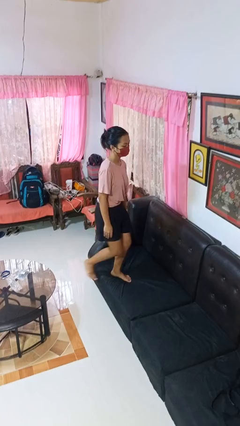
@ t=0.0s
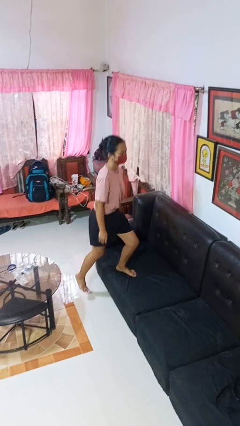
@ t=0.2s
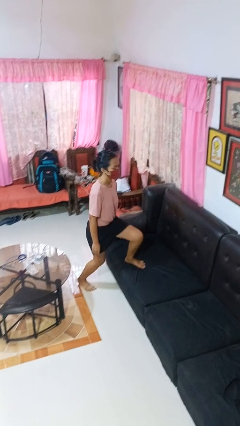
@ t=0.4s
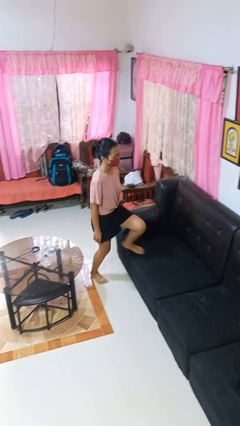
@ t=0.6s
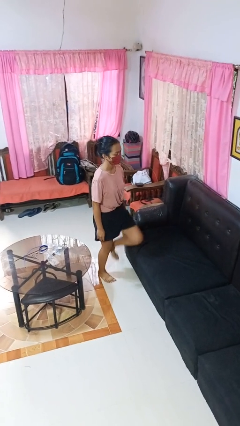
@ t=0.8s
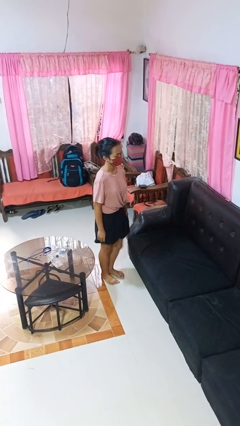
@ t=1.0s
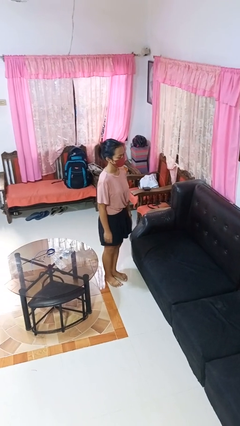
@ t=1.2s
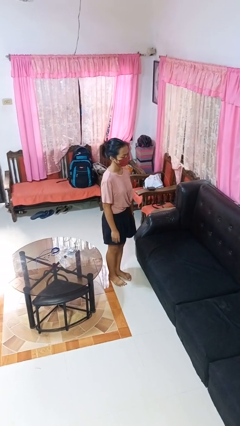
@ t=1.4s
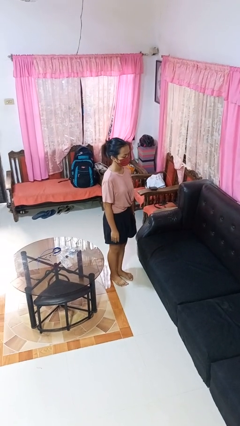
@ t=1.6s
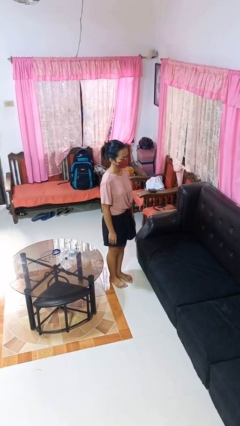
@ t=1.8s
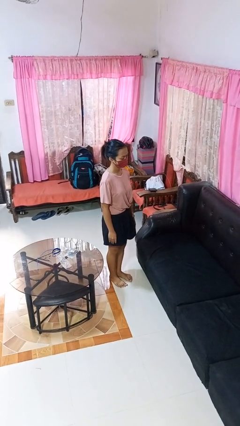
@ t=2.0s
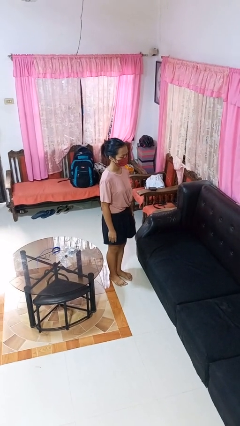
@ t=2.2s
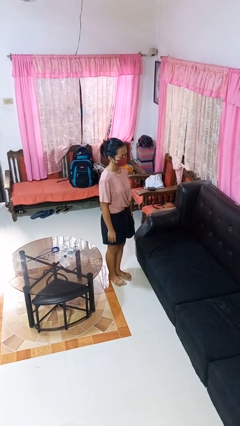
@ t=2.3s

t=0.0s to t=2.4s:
person climbs off couch

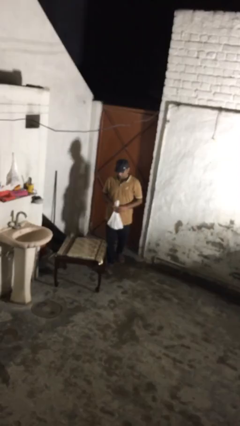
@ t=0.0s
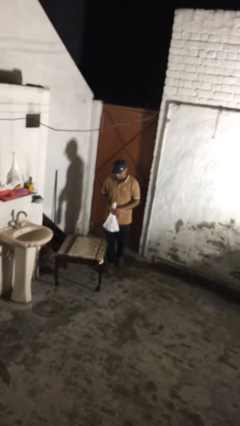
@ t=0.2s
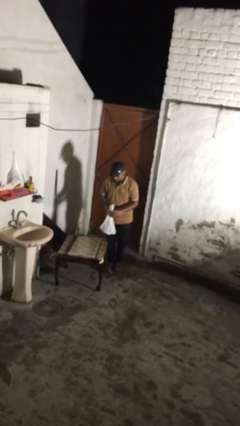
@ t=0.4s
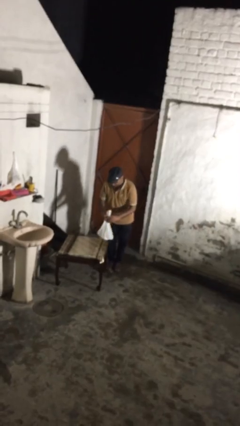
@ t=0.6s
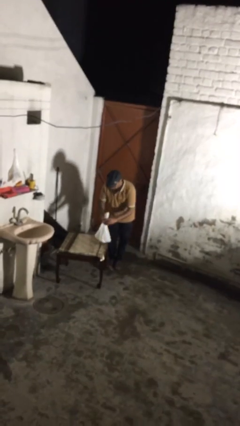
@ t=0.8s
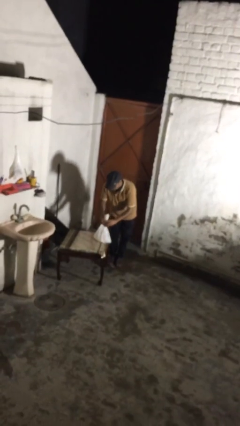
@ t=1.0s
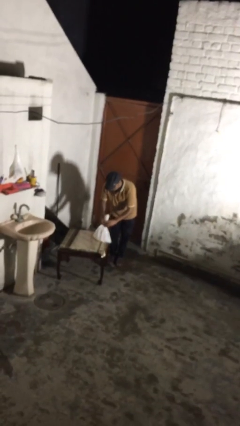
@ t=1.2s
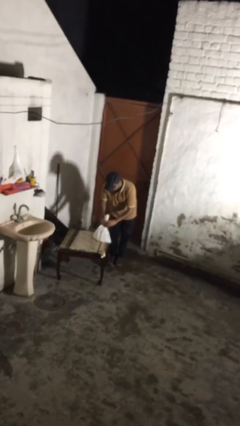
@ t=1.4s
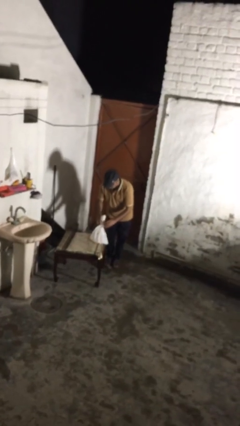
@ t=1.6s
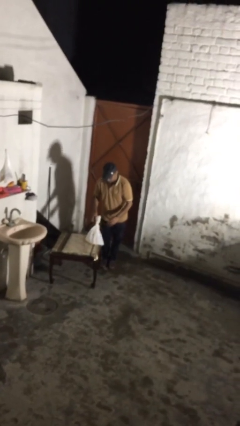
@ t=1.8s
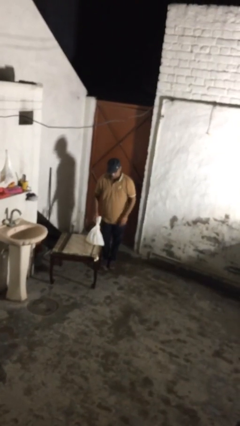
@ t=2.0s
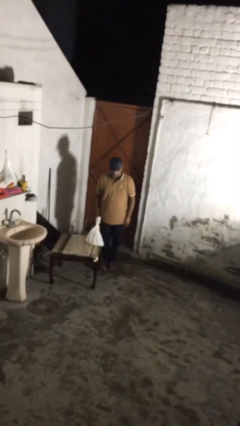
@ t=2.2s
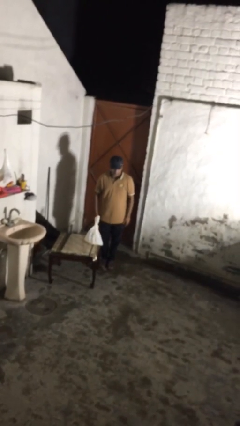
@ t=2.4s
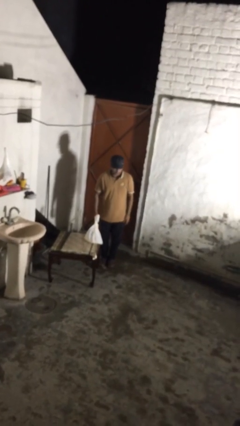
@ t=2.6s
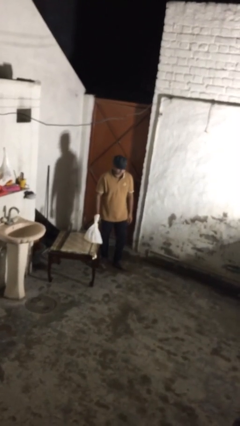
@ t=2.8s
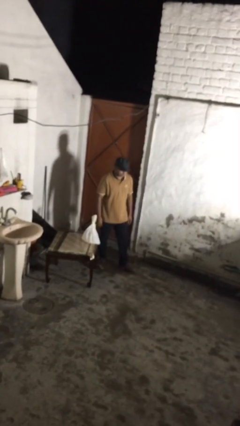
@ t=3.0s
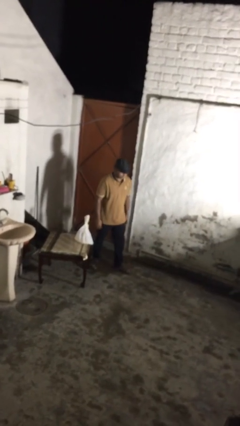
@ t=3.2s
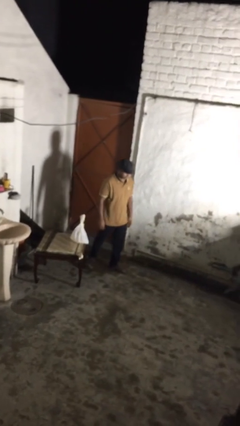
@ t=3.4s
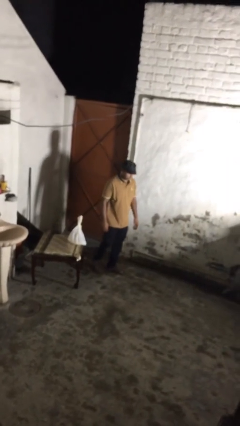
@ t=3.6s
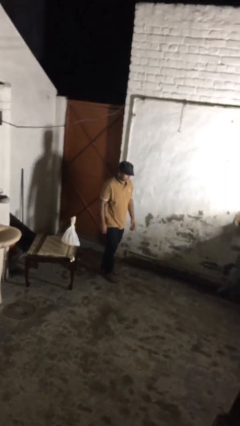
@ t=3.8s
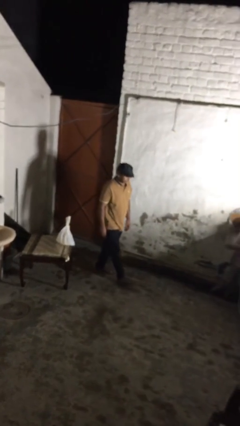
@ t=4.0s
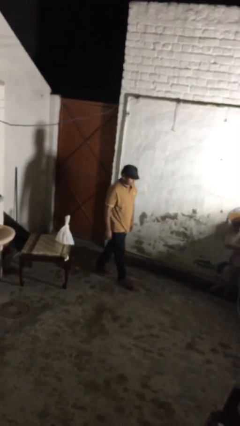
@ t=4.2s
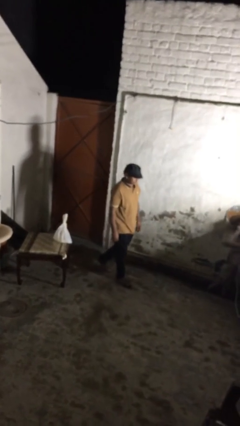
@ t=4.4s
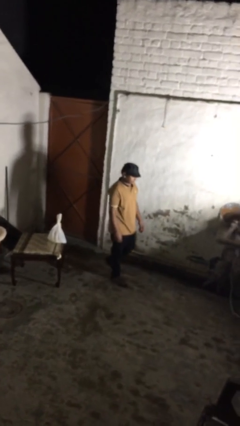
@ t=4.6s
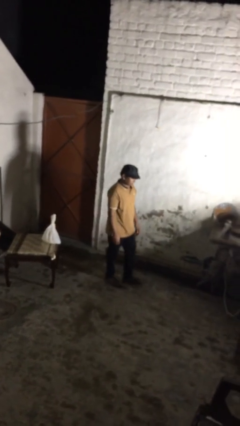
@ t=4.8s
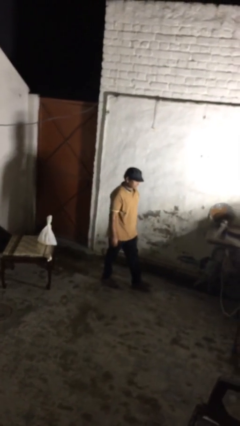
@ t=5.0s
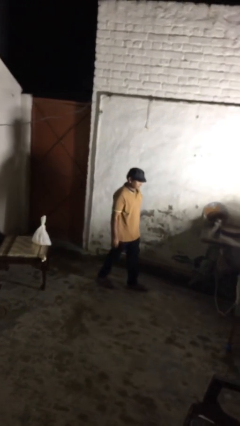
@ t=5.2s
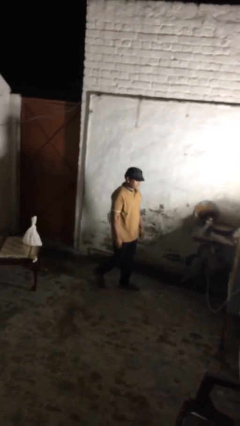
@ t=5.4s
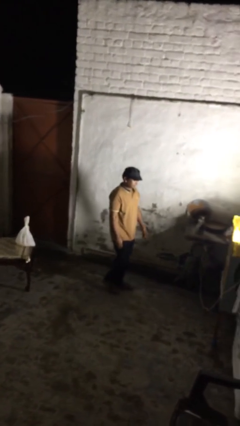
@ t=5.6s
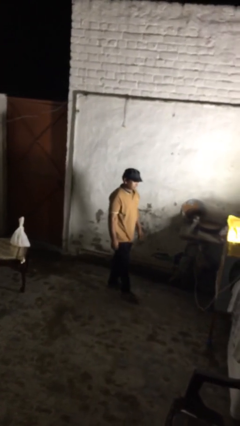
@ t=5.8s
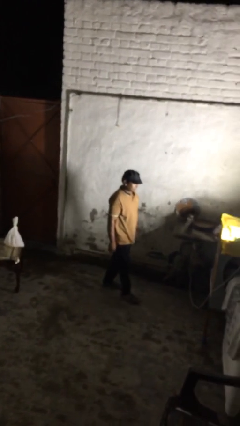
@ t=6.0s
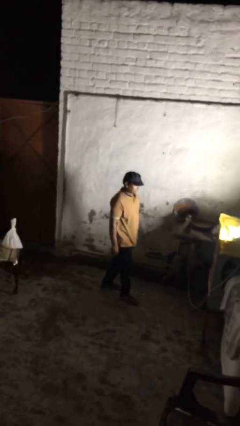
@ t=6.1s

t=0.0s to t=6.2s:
person puts down object on table

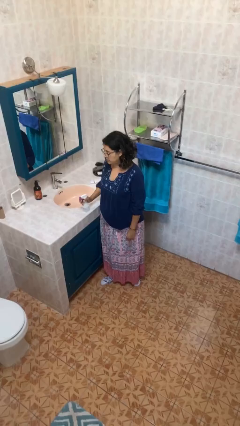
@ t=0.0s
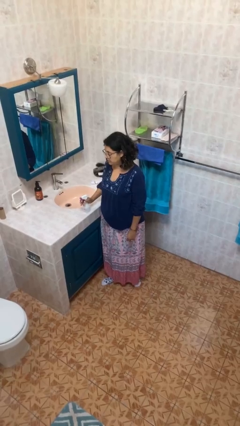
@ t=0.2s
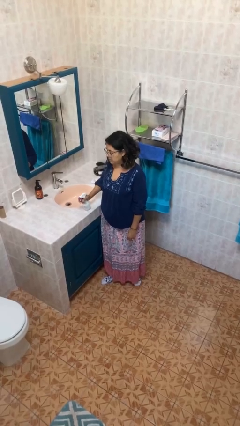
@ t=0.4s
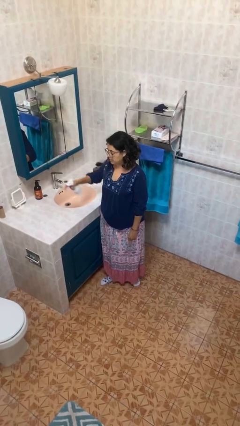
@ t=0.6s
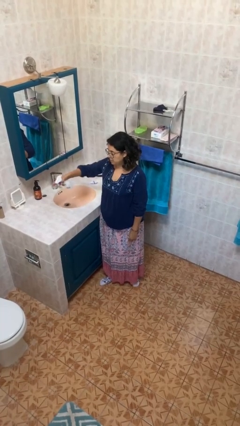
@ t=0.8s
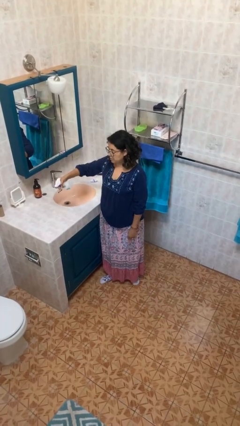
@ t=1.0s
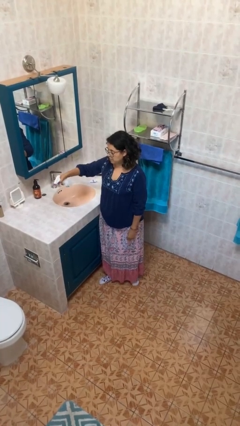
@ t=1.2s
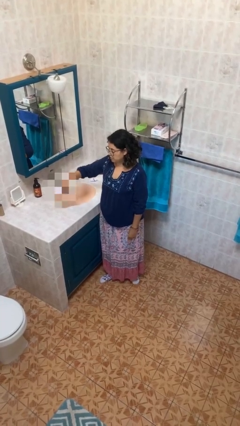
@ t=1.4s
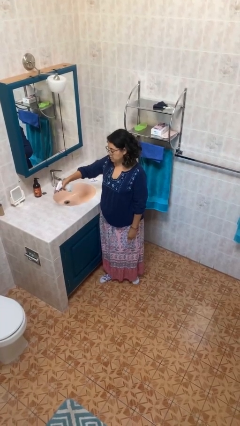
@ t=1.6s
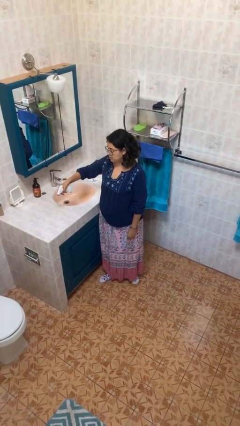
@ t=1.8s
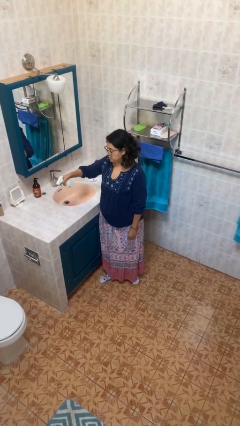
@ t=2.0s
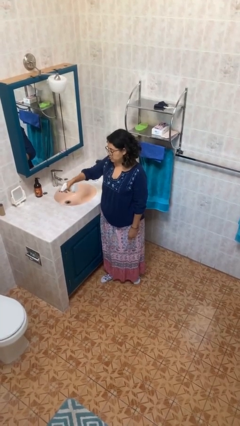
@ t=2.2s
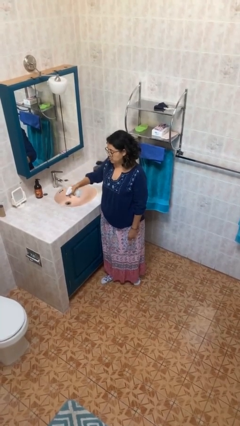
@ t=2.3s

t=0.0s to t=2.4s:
person sprays from bottle

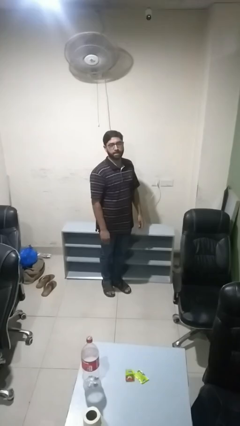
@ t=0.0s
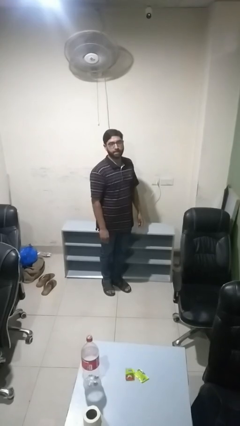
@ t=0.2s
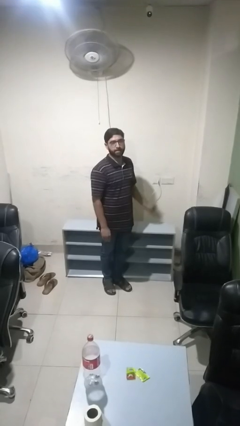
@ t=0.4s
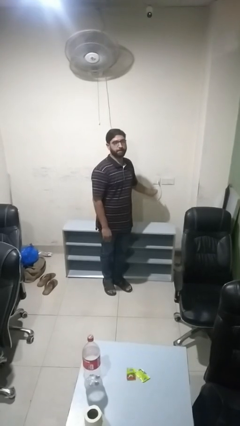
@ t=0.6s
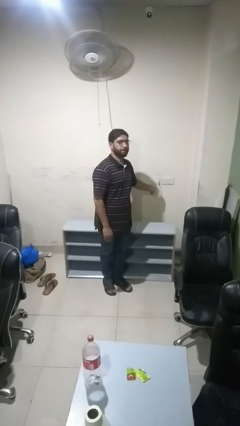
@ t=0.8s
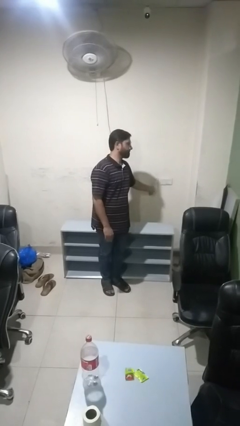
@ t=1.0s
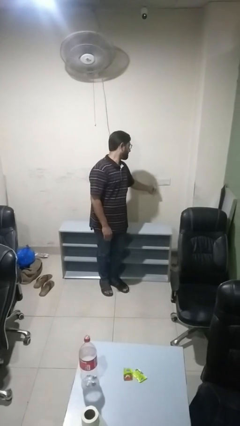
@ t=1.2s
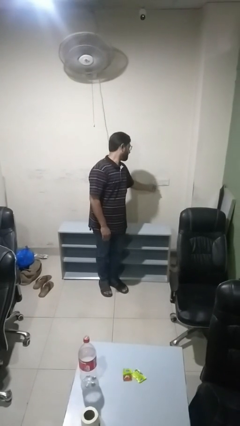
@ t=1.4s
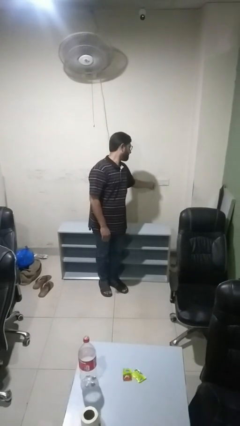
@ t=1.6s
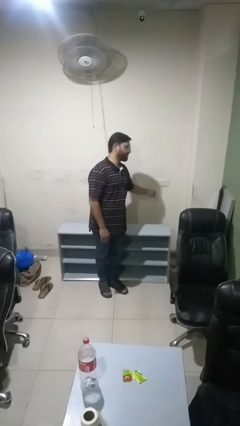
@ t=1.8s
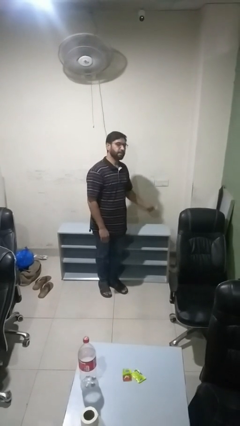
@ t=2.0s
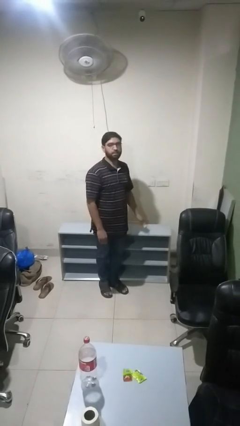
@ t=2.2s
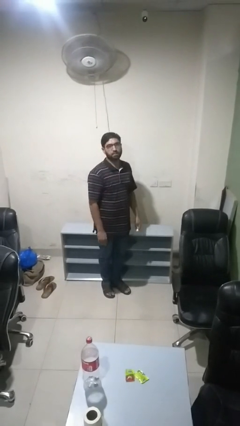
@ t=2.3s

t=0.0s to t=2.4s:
person unplugs from electrical socket

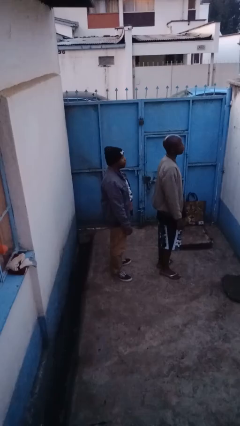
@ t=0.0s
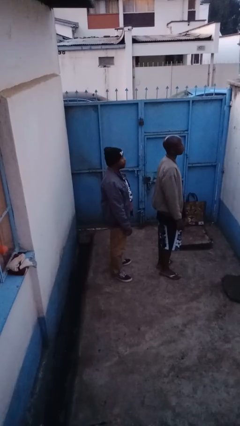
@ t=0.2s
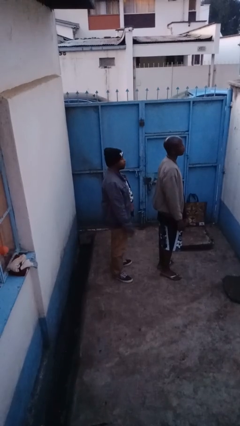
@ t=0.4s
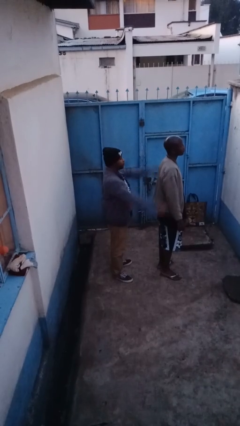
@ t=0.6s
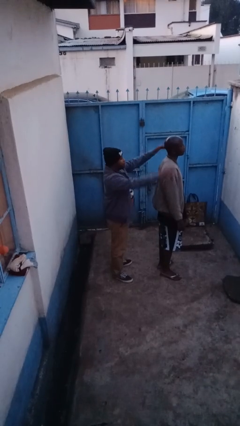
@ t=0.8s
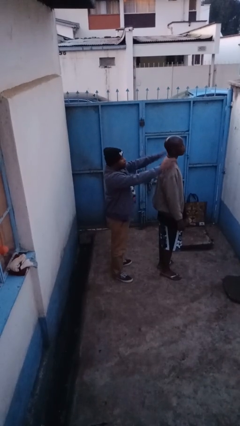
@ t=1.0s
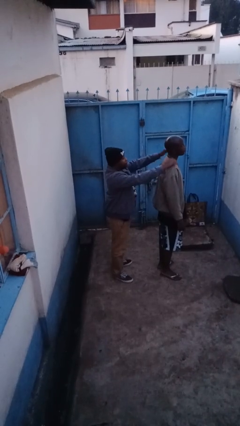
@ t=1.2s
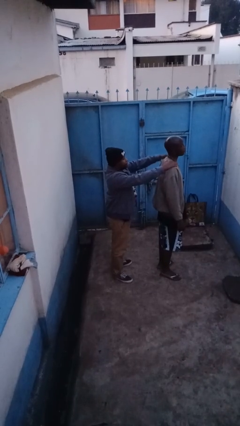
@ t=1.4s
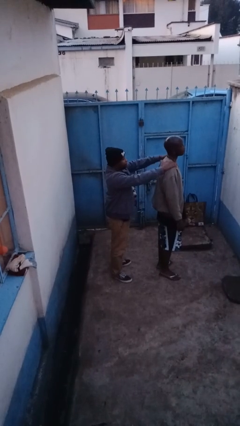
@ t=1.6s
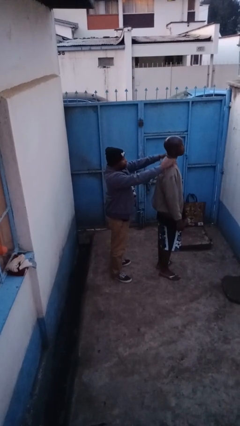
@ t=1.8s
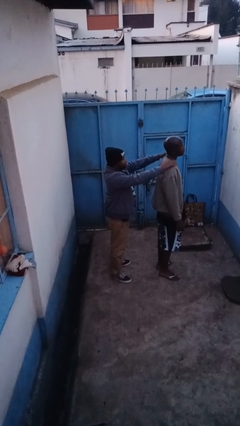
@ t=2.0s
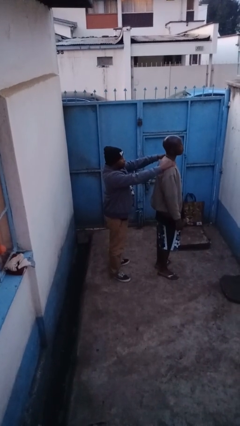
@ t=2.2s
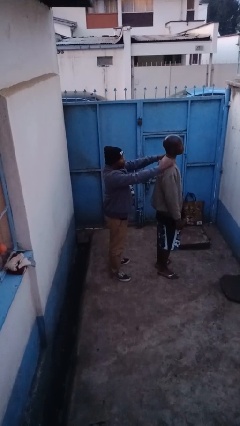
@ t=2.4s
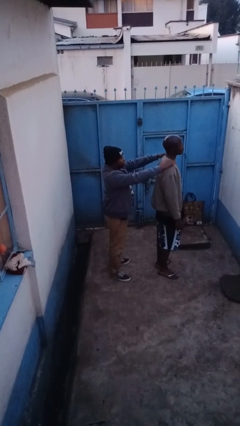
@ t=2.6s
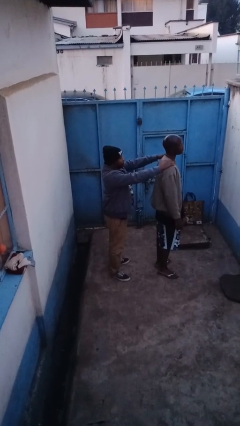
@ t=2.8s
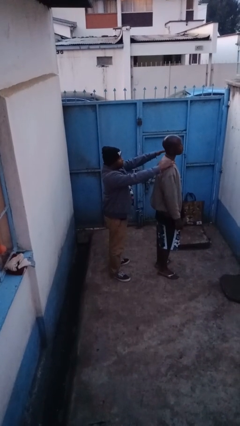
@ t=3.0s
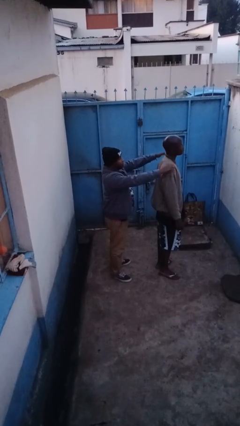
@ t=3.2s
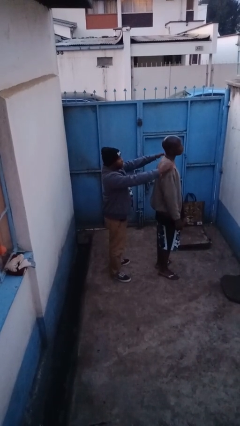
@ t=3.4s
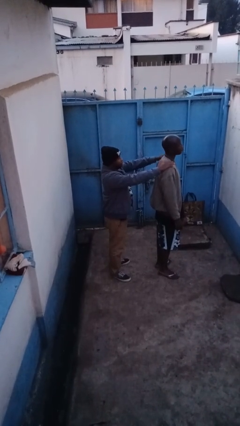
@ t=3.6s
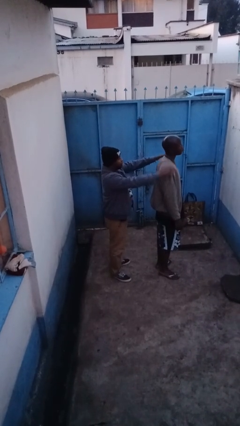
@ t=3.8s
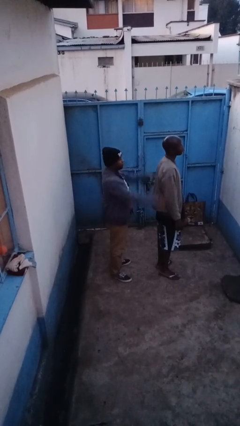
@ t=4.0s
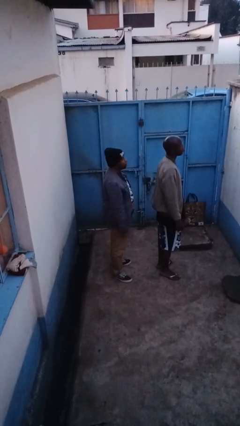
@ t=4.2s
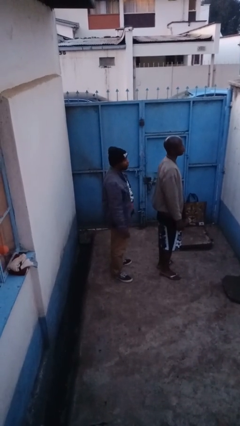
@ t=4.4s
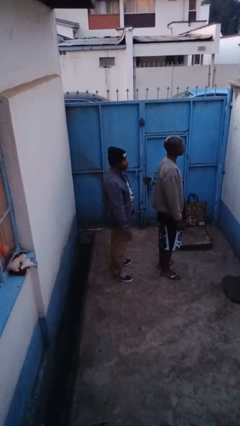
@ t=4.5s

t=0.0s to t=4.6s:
person pounds shoulders of person
